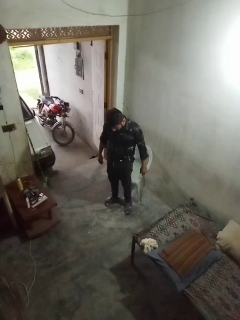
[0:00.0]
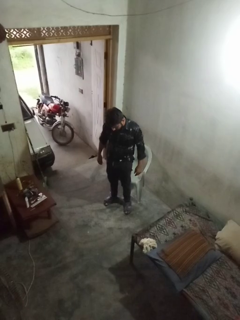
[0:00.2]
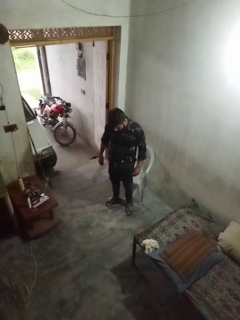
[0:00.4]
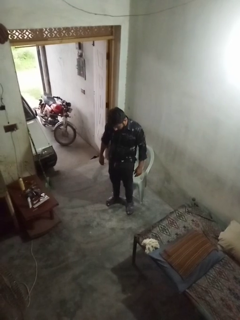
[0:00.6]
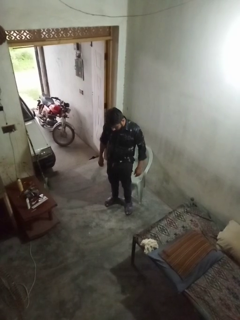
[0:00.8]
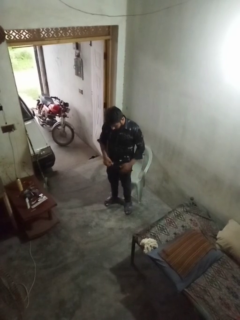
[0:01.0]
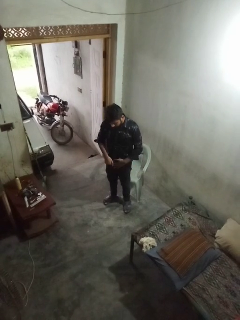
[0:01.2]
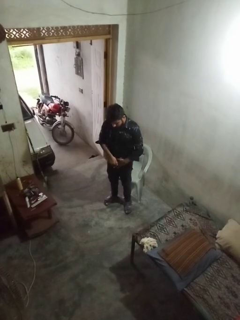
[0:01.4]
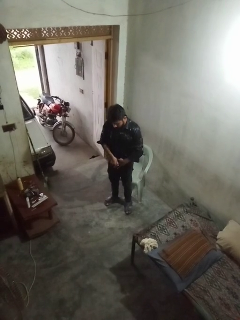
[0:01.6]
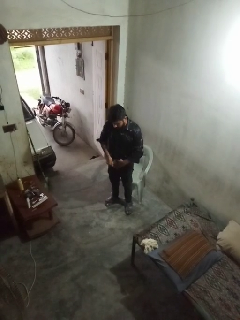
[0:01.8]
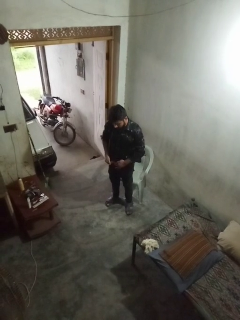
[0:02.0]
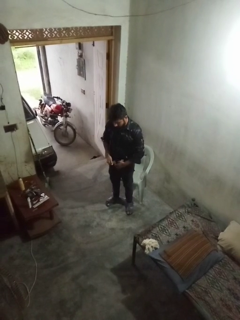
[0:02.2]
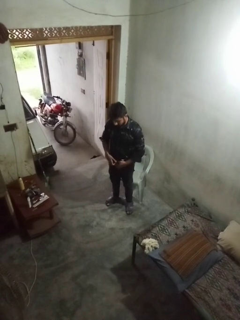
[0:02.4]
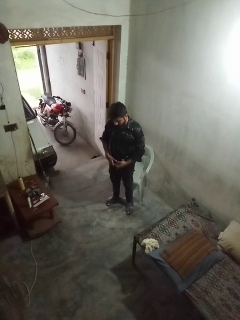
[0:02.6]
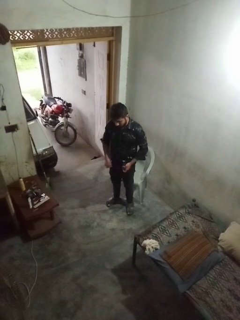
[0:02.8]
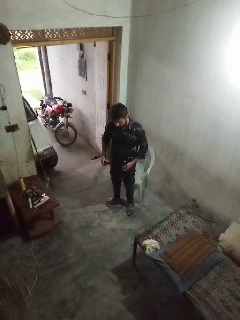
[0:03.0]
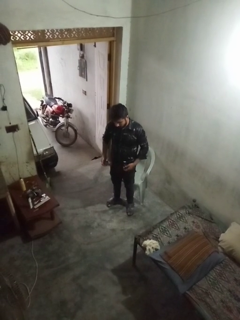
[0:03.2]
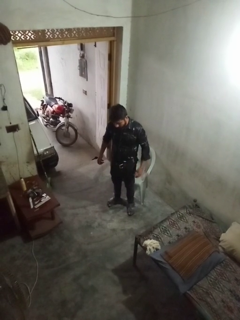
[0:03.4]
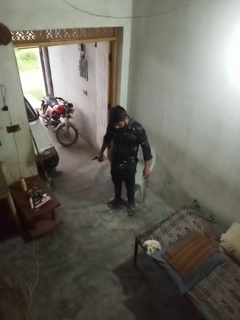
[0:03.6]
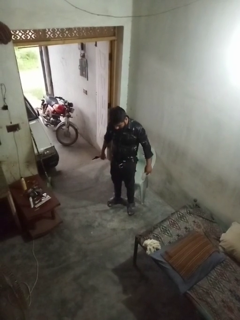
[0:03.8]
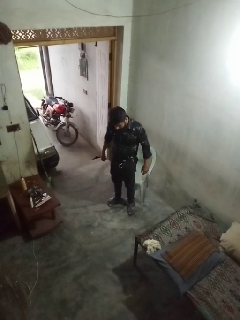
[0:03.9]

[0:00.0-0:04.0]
person takes off belt

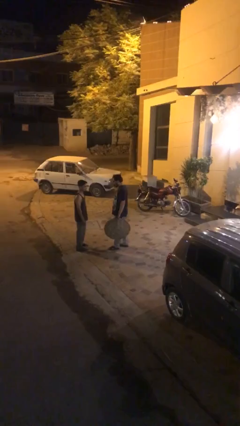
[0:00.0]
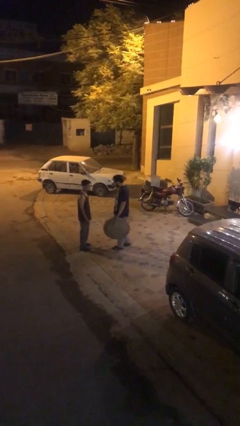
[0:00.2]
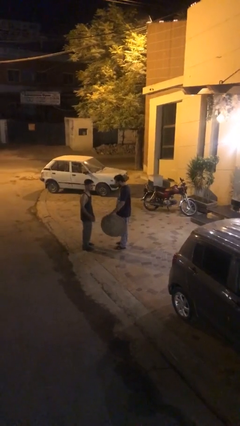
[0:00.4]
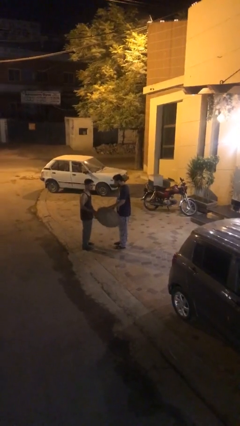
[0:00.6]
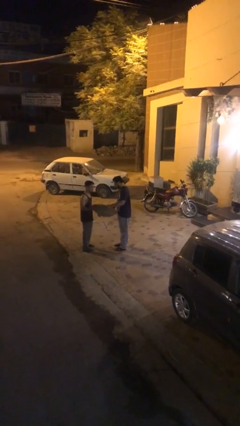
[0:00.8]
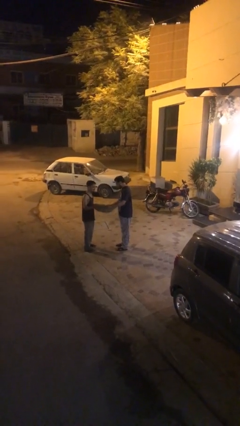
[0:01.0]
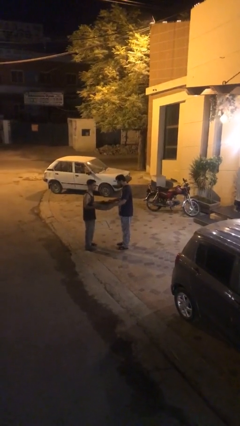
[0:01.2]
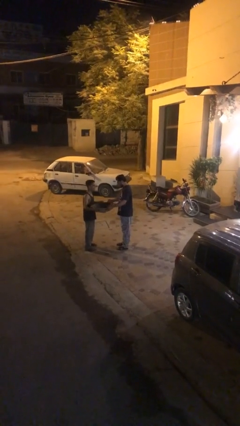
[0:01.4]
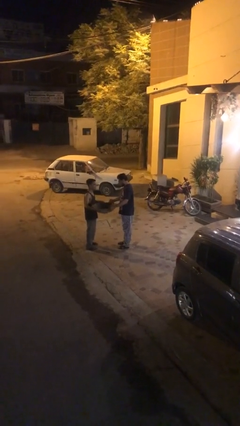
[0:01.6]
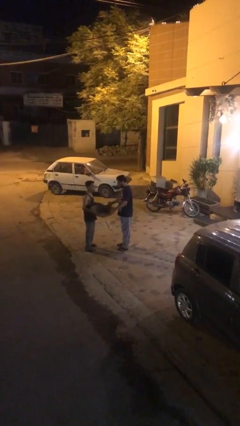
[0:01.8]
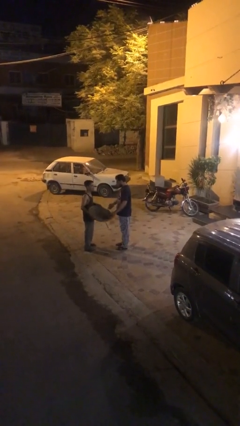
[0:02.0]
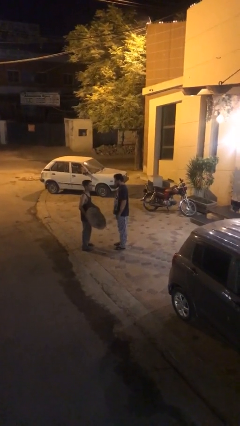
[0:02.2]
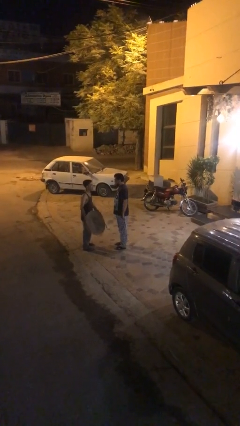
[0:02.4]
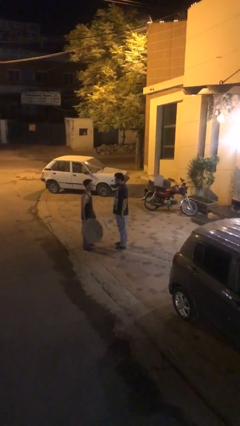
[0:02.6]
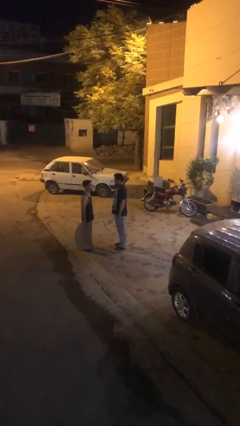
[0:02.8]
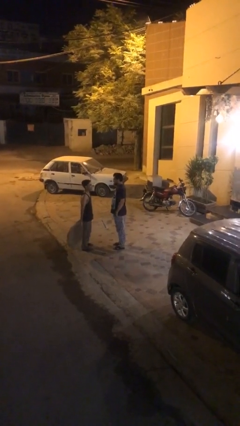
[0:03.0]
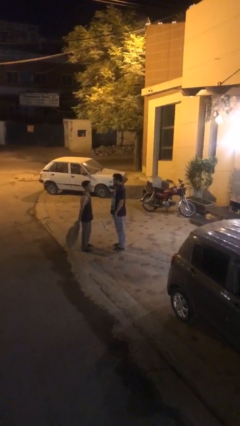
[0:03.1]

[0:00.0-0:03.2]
person transfers object to person

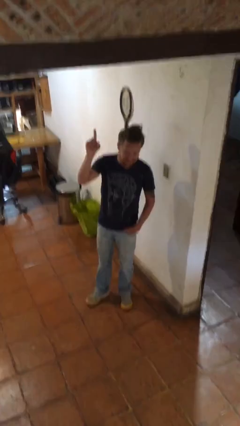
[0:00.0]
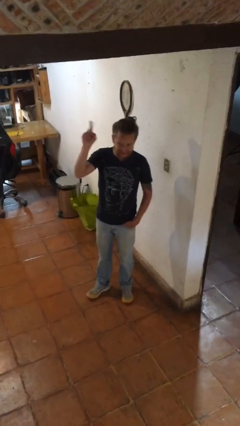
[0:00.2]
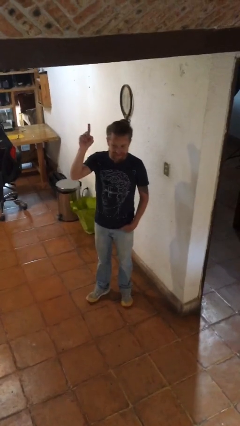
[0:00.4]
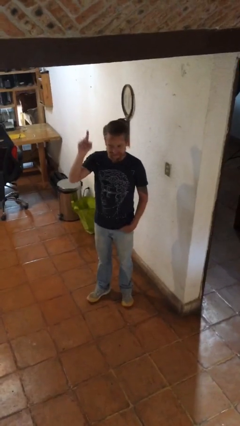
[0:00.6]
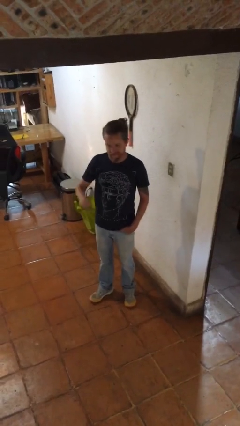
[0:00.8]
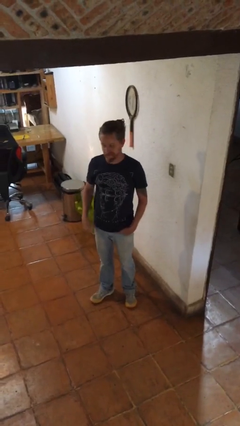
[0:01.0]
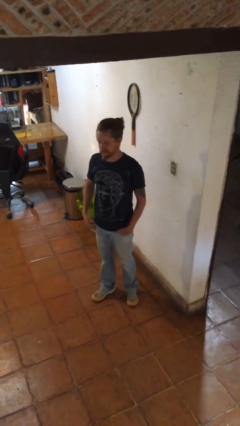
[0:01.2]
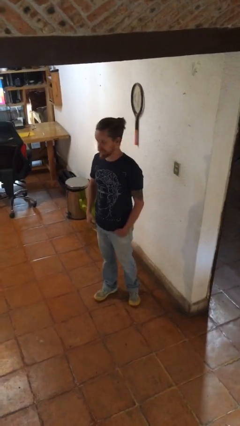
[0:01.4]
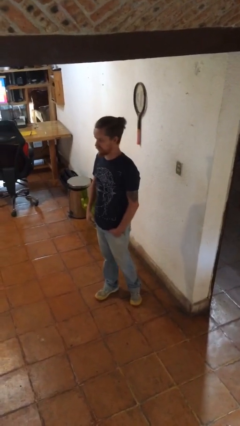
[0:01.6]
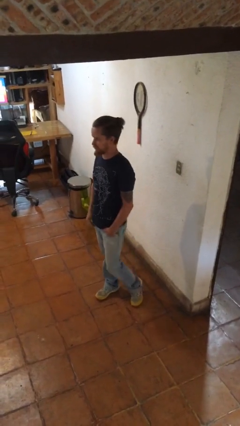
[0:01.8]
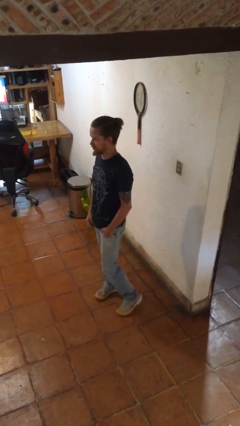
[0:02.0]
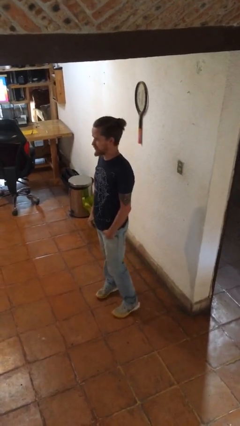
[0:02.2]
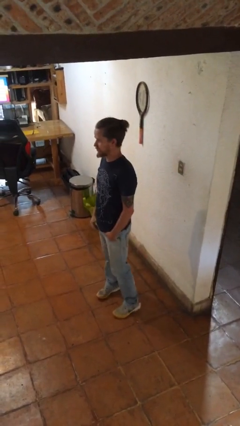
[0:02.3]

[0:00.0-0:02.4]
person gestures lower hand

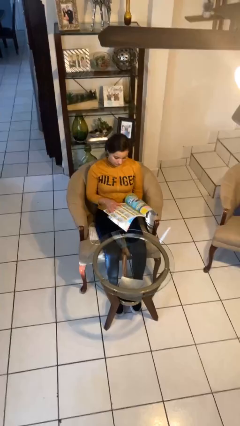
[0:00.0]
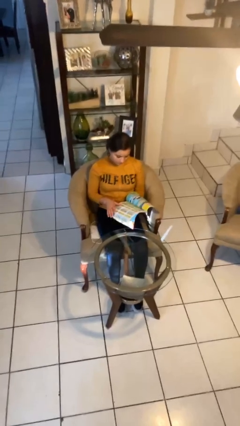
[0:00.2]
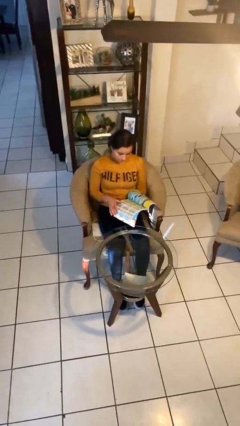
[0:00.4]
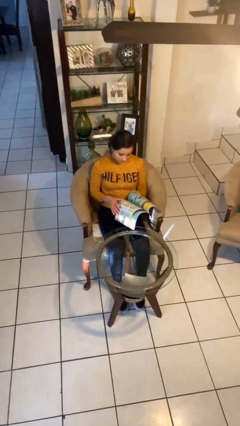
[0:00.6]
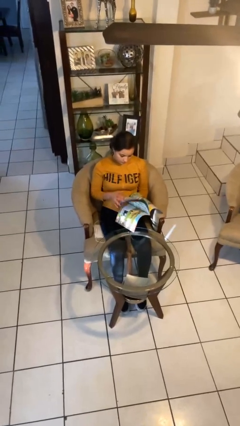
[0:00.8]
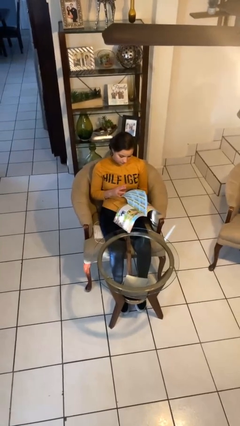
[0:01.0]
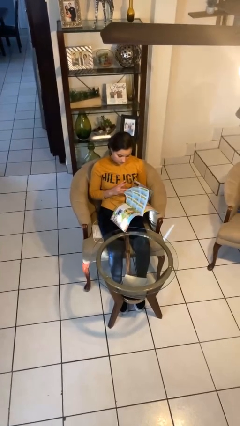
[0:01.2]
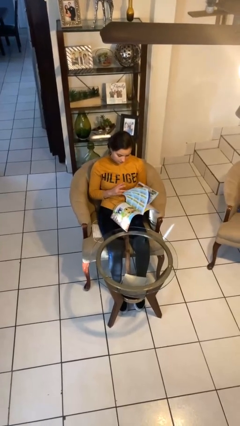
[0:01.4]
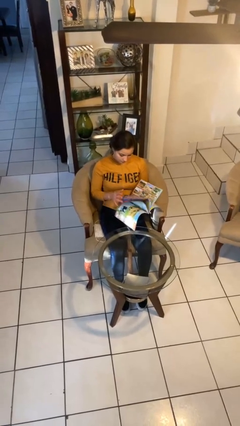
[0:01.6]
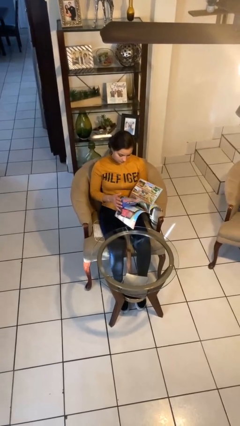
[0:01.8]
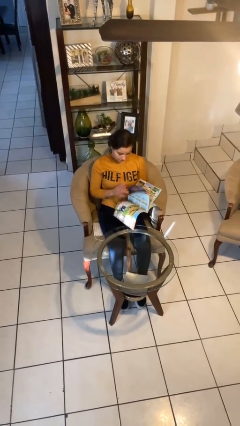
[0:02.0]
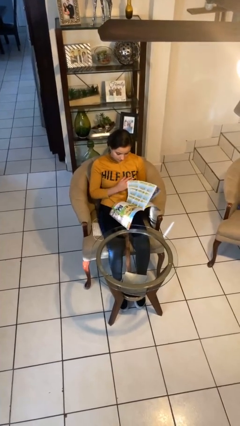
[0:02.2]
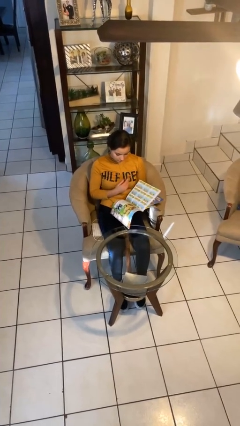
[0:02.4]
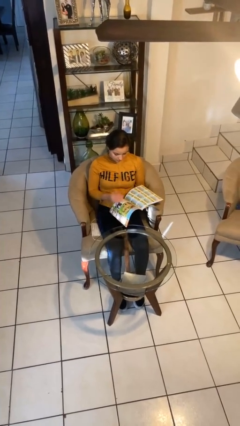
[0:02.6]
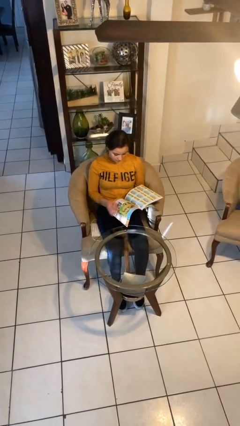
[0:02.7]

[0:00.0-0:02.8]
person reads magazine

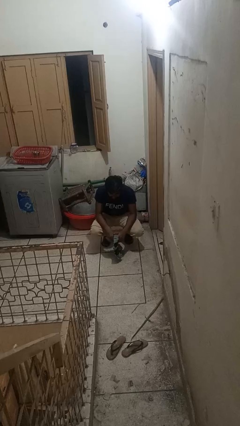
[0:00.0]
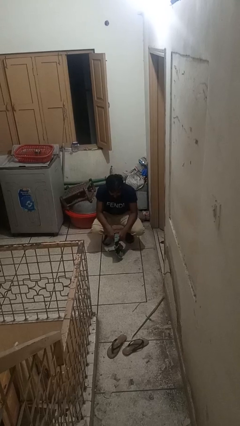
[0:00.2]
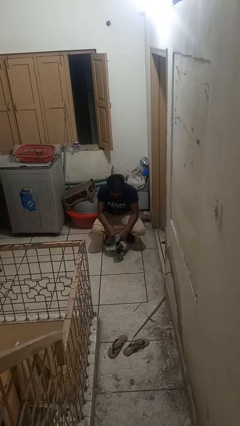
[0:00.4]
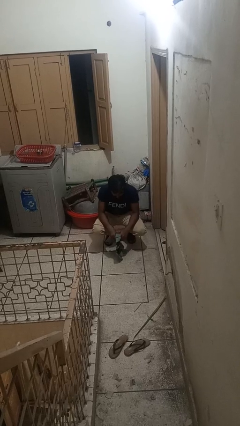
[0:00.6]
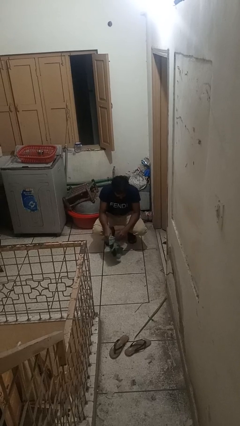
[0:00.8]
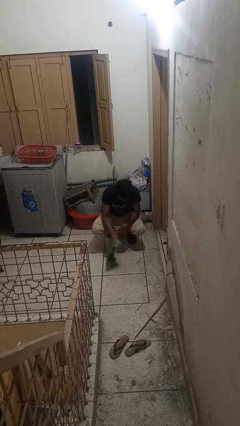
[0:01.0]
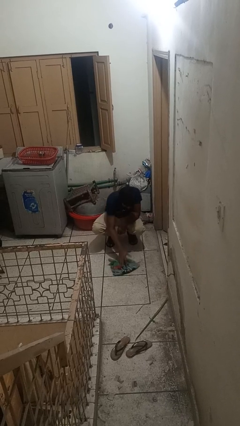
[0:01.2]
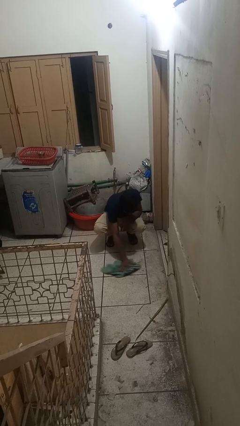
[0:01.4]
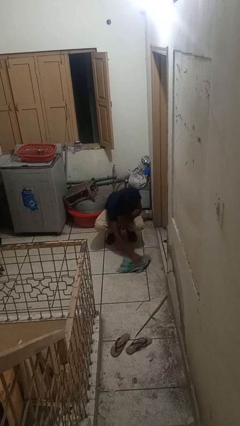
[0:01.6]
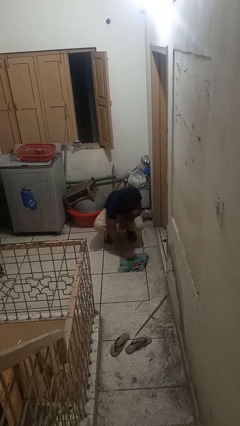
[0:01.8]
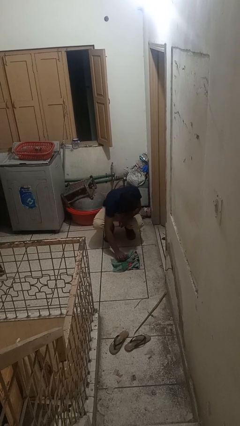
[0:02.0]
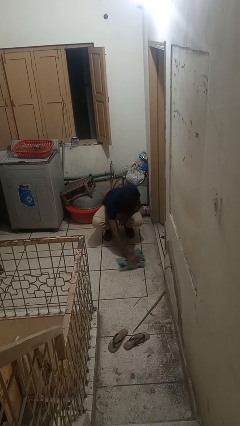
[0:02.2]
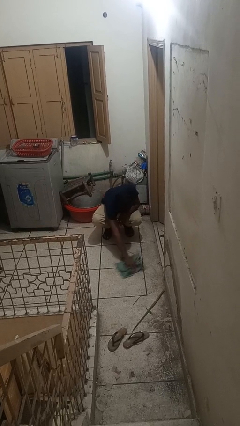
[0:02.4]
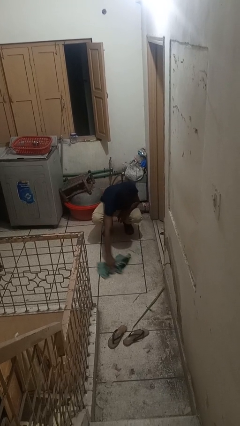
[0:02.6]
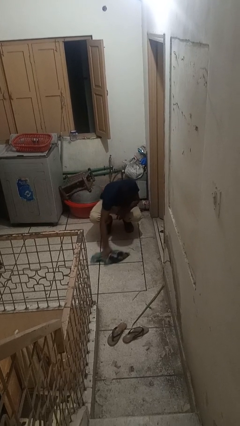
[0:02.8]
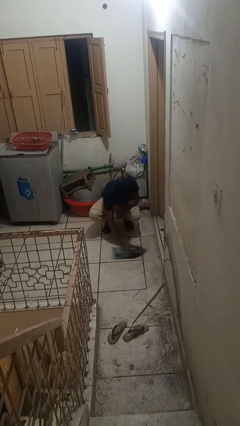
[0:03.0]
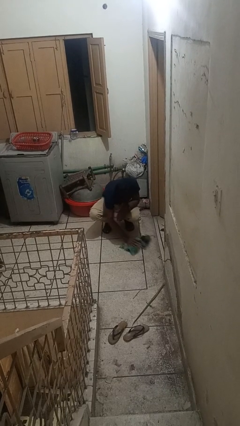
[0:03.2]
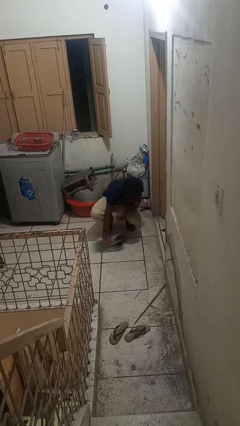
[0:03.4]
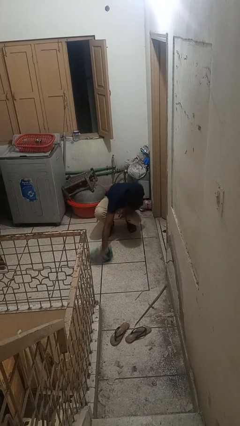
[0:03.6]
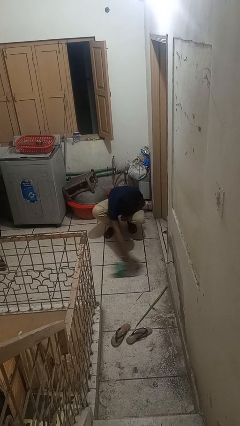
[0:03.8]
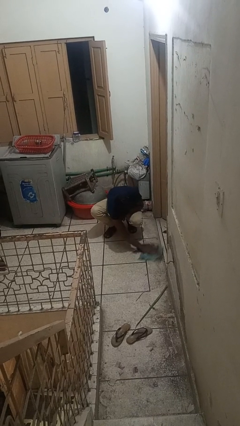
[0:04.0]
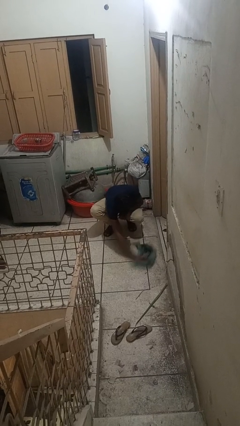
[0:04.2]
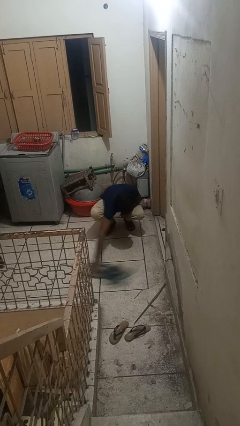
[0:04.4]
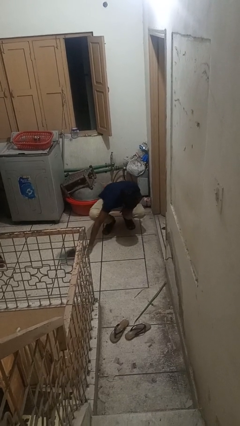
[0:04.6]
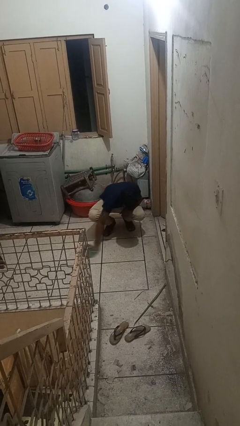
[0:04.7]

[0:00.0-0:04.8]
person mops

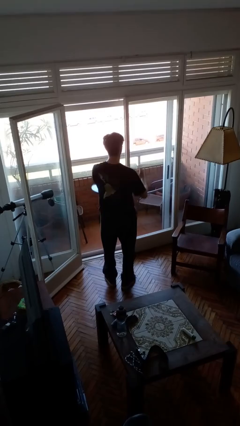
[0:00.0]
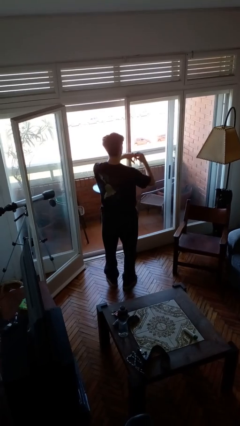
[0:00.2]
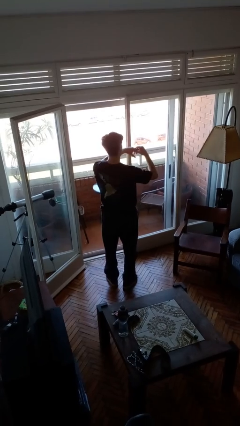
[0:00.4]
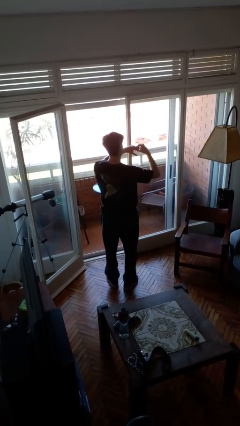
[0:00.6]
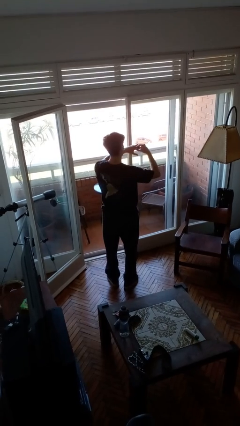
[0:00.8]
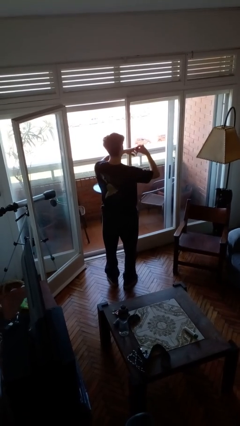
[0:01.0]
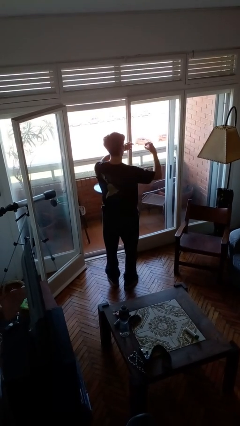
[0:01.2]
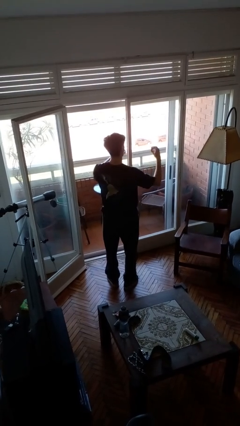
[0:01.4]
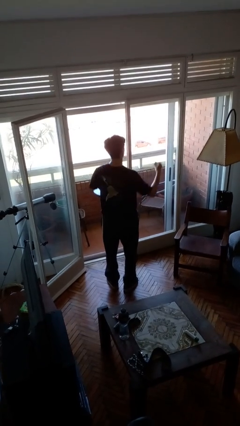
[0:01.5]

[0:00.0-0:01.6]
person takes off ring
